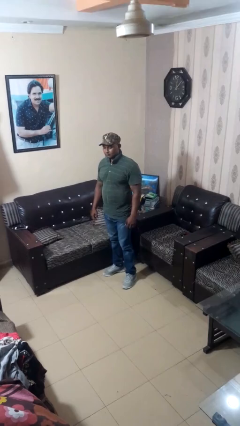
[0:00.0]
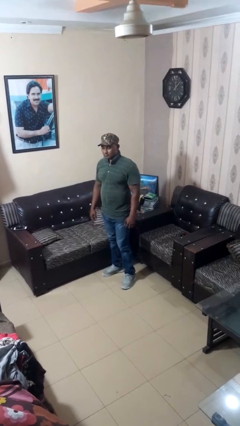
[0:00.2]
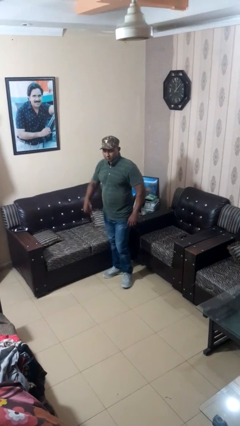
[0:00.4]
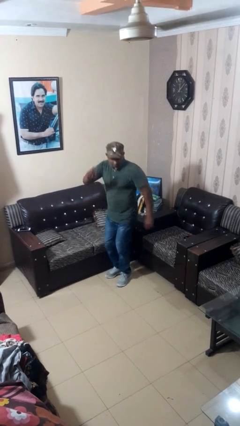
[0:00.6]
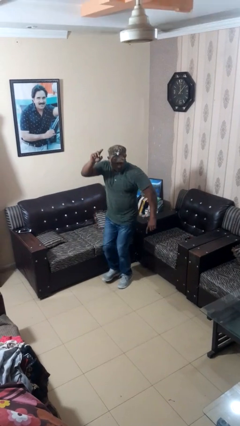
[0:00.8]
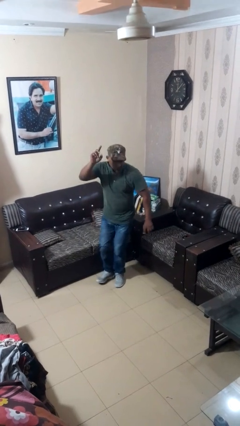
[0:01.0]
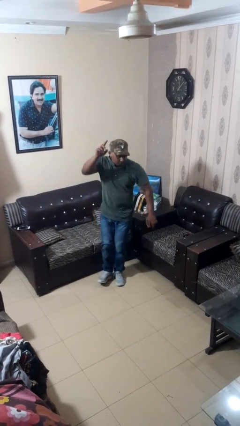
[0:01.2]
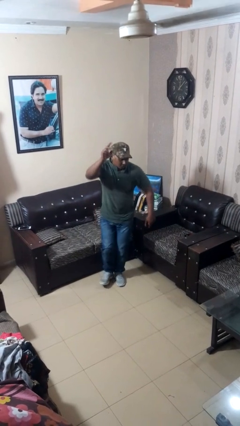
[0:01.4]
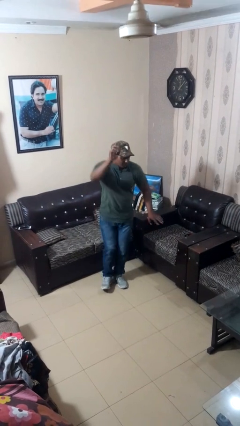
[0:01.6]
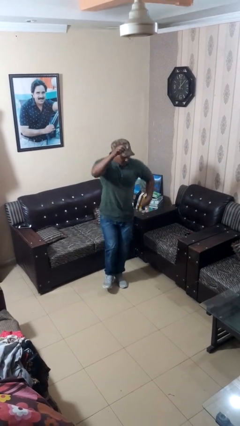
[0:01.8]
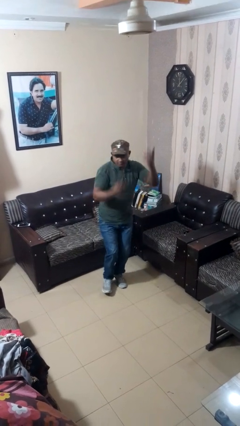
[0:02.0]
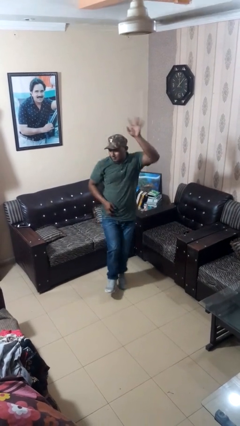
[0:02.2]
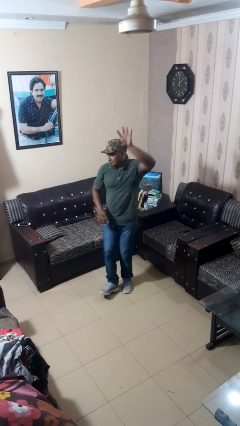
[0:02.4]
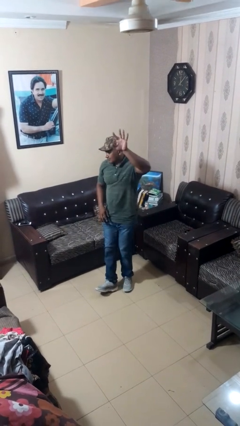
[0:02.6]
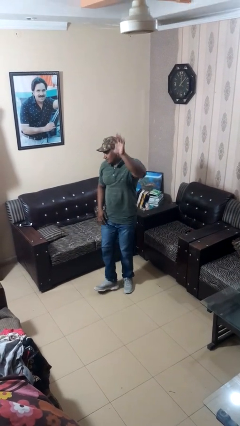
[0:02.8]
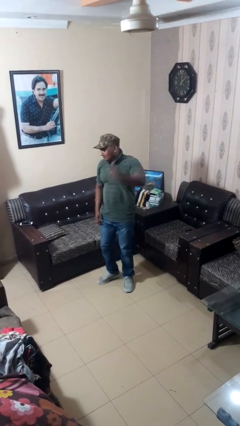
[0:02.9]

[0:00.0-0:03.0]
person dances in place

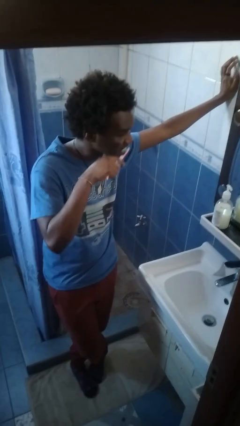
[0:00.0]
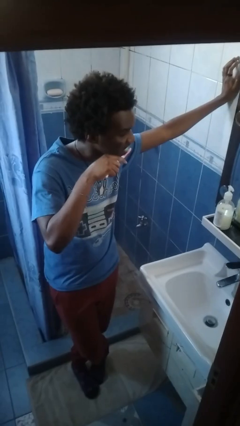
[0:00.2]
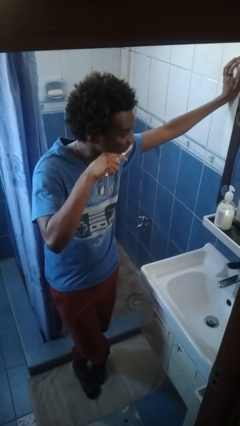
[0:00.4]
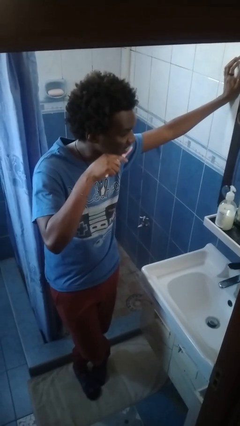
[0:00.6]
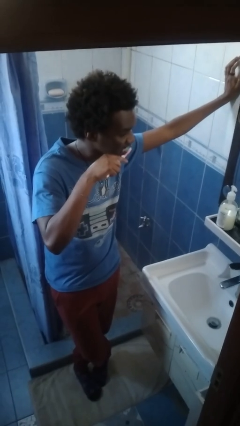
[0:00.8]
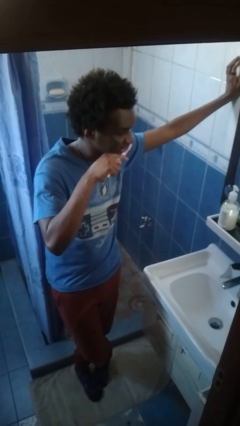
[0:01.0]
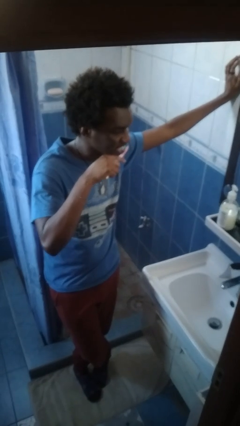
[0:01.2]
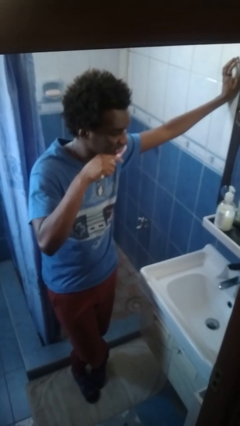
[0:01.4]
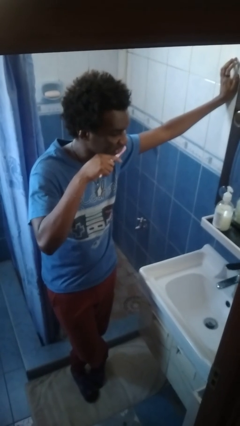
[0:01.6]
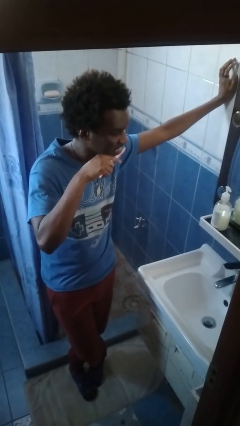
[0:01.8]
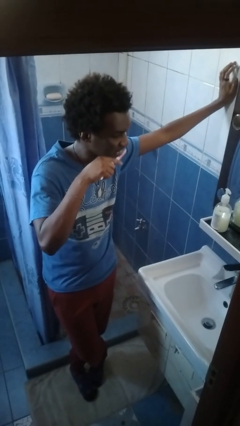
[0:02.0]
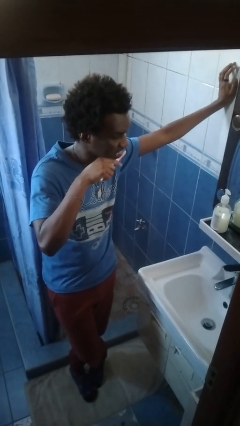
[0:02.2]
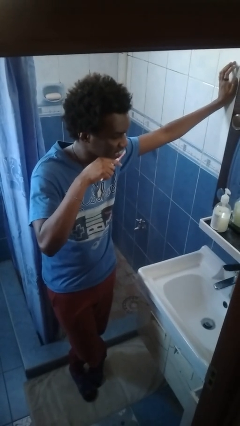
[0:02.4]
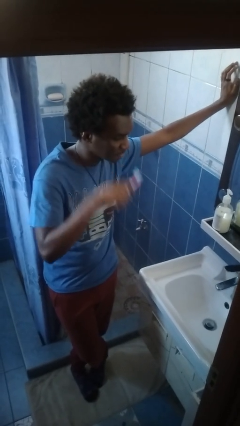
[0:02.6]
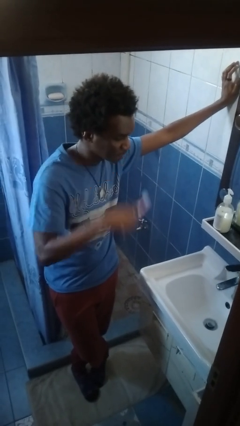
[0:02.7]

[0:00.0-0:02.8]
person brushes teeth

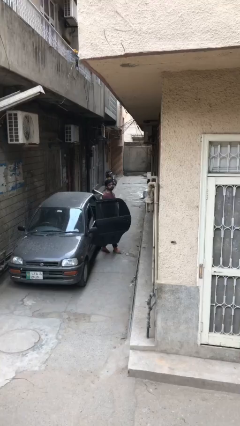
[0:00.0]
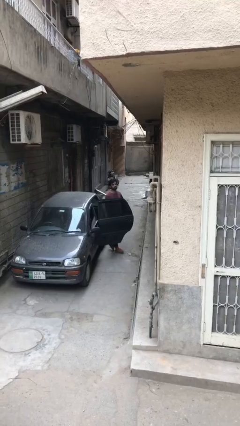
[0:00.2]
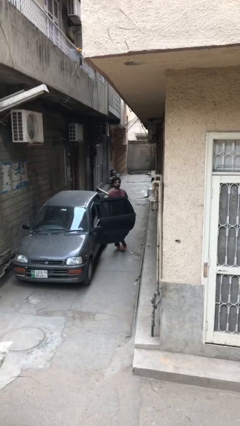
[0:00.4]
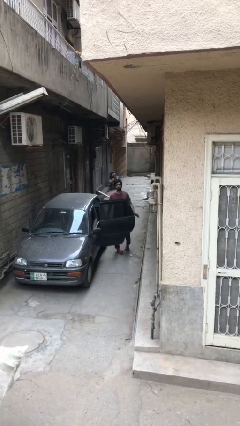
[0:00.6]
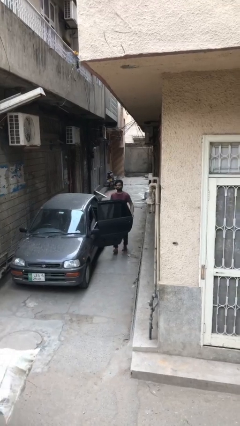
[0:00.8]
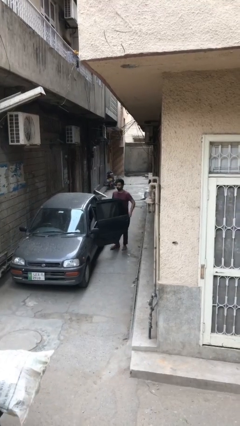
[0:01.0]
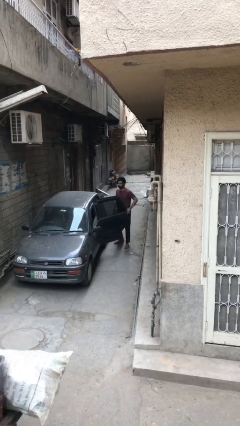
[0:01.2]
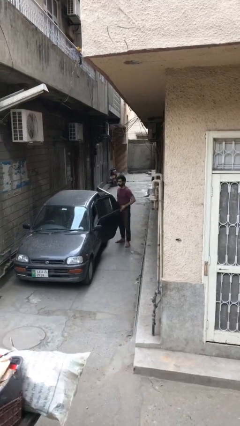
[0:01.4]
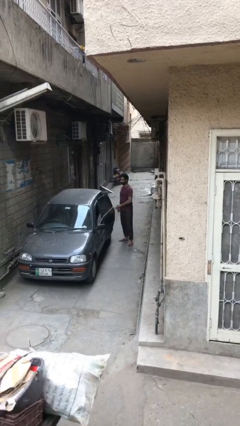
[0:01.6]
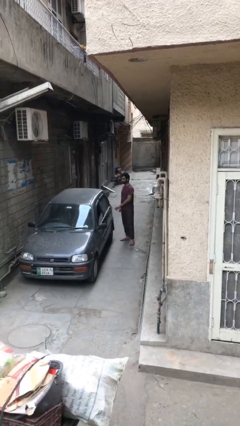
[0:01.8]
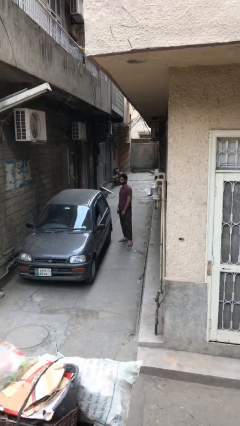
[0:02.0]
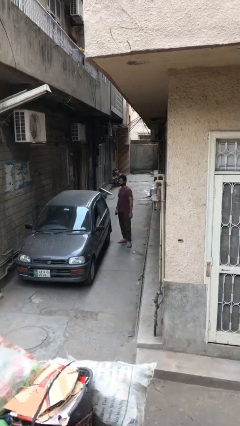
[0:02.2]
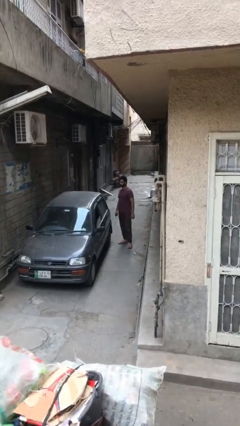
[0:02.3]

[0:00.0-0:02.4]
person closes car door

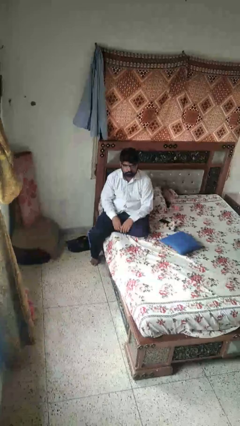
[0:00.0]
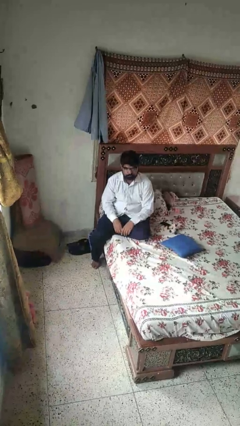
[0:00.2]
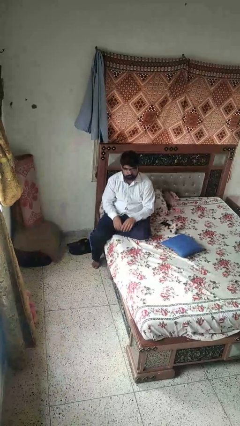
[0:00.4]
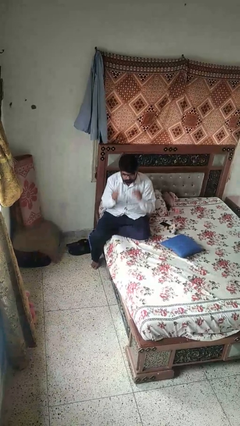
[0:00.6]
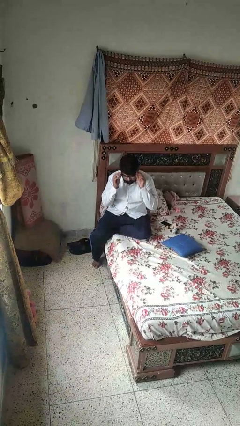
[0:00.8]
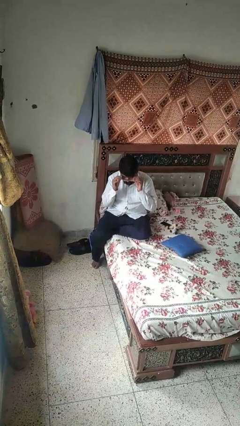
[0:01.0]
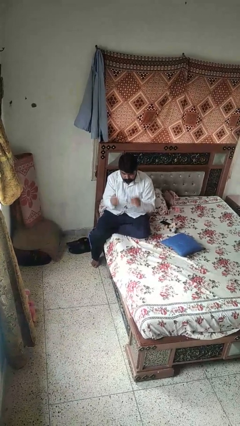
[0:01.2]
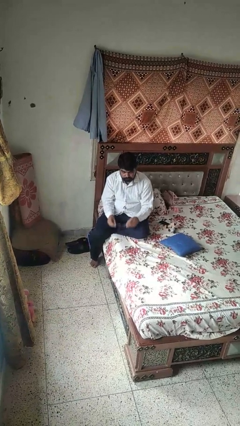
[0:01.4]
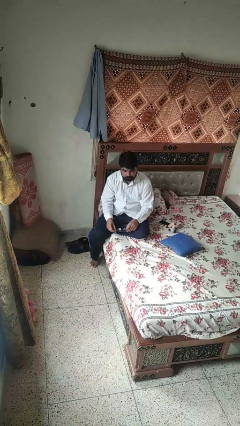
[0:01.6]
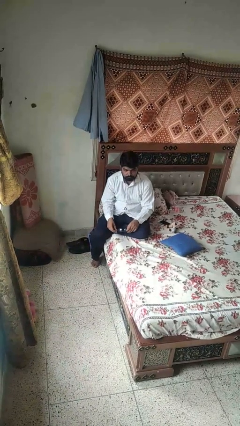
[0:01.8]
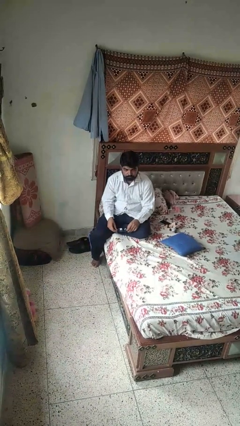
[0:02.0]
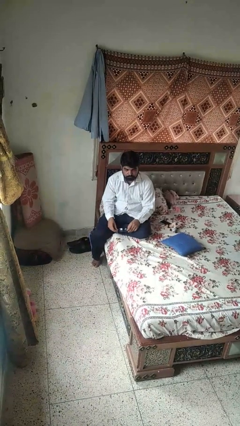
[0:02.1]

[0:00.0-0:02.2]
person takes off glasses

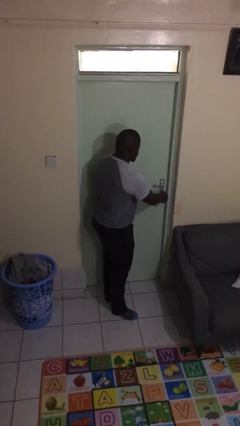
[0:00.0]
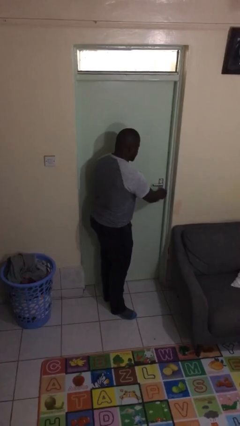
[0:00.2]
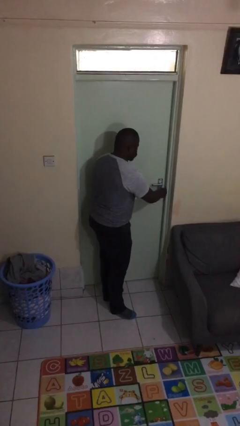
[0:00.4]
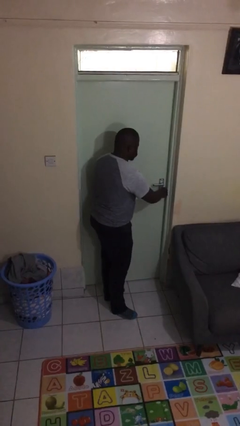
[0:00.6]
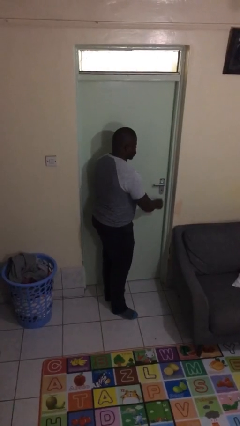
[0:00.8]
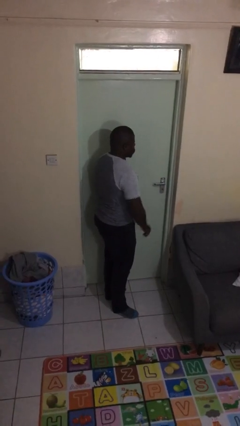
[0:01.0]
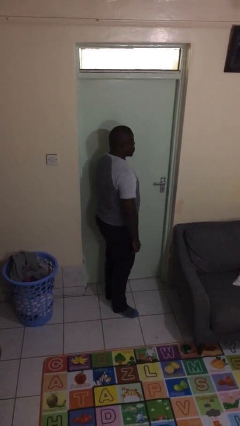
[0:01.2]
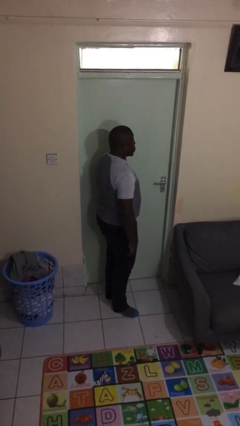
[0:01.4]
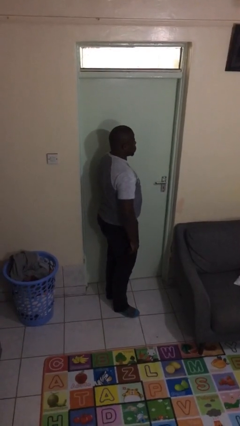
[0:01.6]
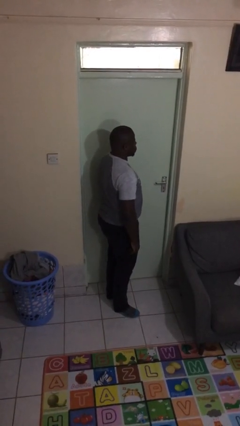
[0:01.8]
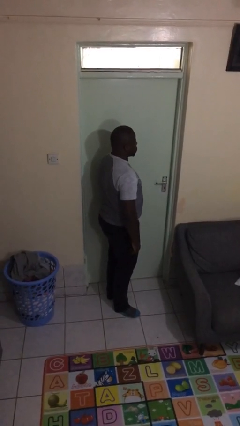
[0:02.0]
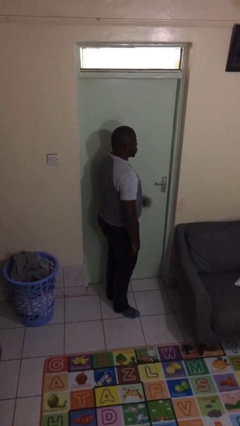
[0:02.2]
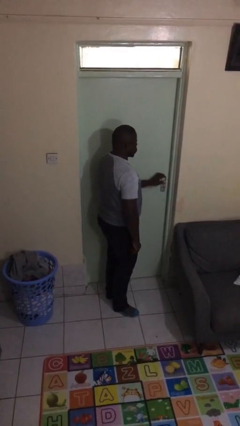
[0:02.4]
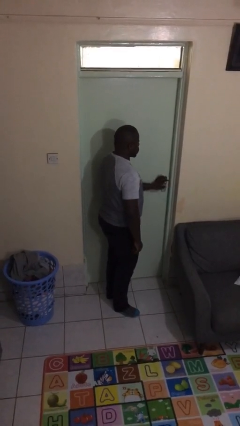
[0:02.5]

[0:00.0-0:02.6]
person unlocks door with keys

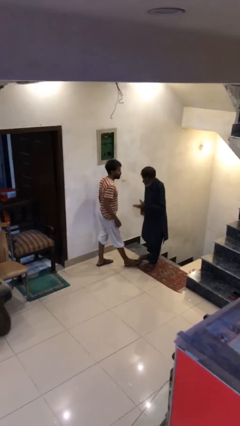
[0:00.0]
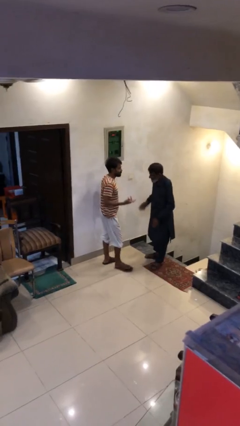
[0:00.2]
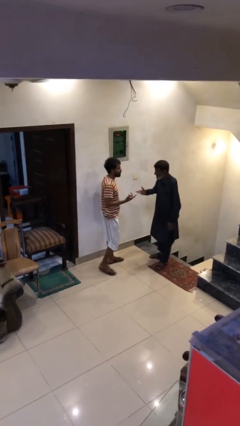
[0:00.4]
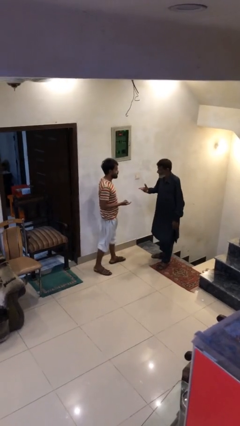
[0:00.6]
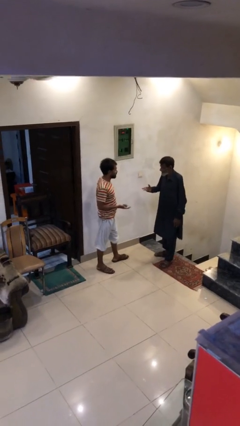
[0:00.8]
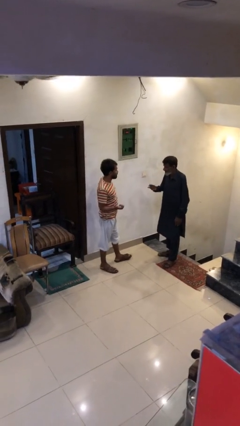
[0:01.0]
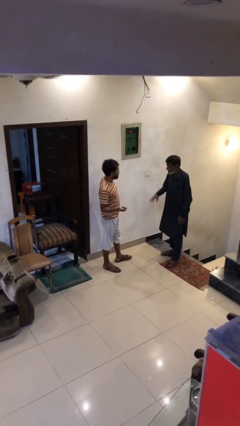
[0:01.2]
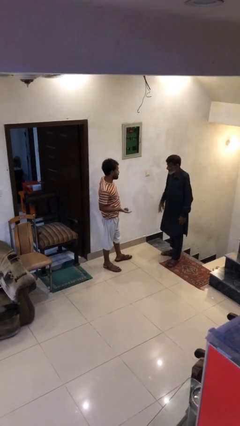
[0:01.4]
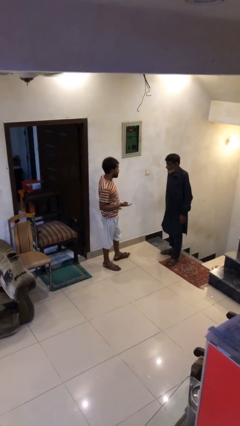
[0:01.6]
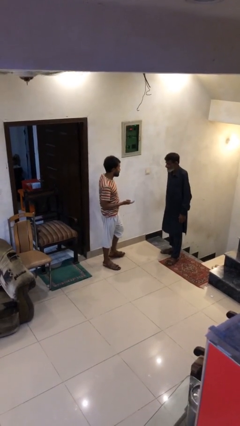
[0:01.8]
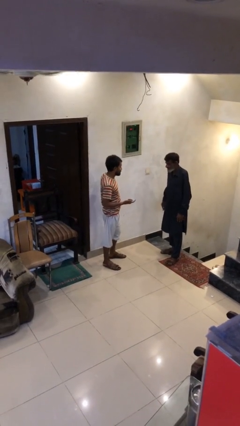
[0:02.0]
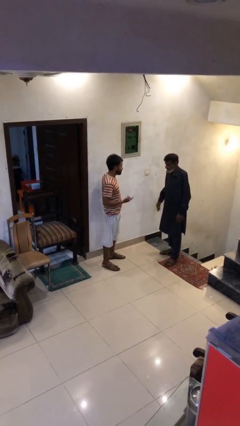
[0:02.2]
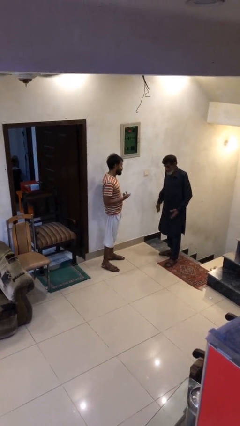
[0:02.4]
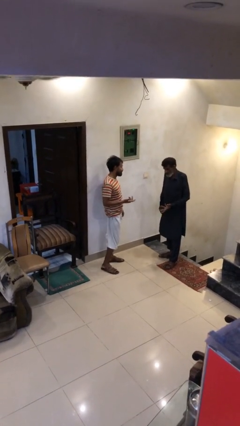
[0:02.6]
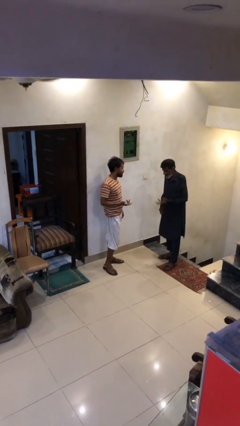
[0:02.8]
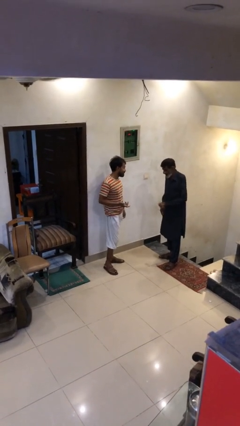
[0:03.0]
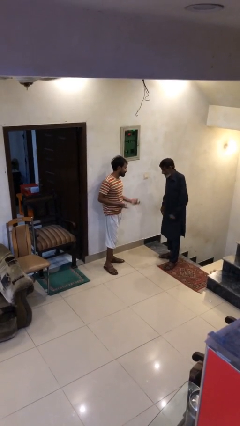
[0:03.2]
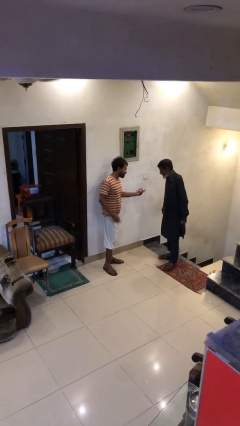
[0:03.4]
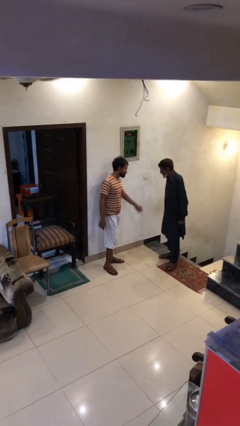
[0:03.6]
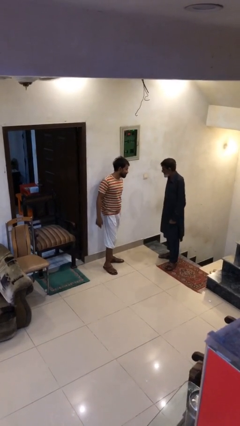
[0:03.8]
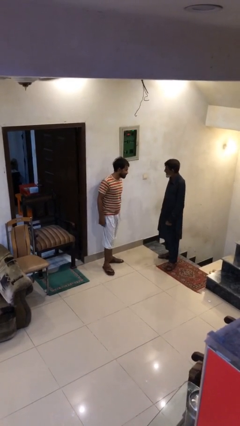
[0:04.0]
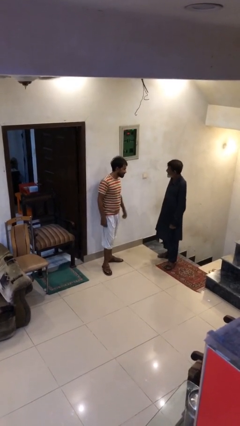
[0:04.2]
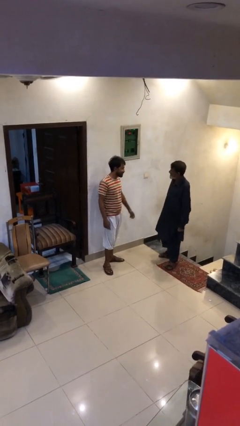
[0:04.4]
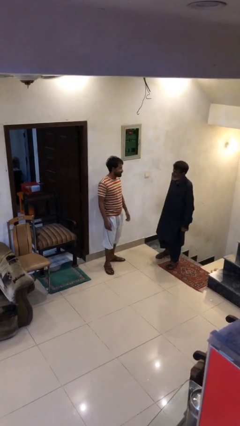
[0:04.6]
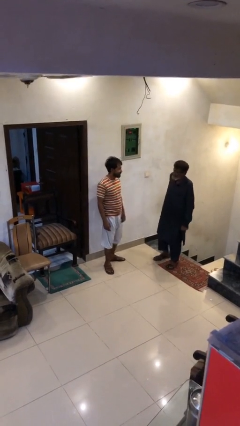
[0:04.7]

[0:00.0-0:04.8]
person talks to person
